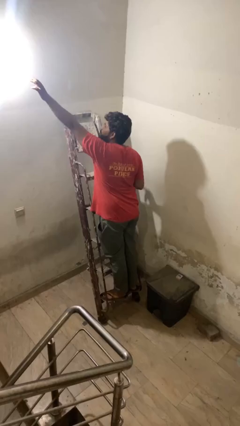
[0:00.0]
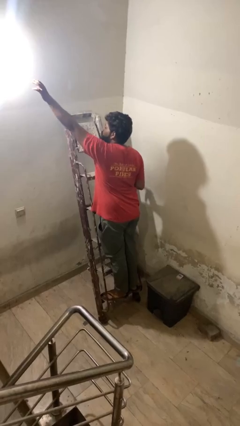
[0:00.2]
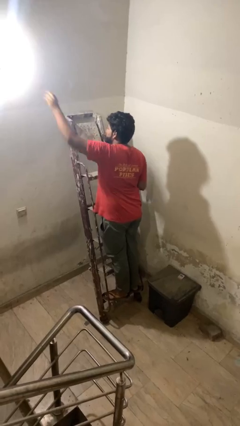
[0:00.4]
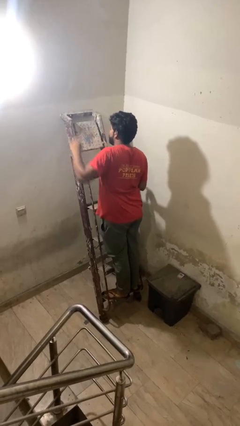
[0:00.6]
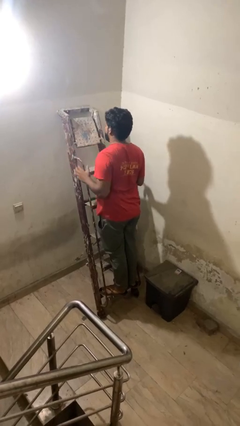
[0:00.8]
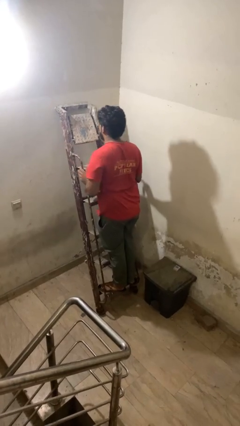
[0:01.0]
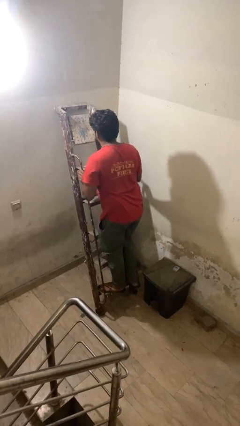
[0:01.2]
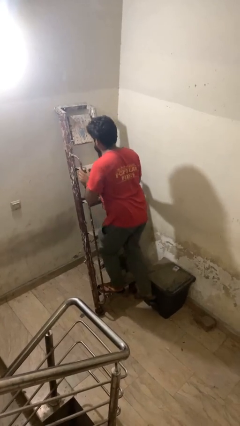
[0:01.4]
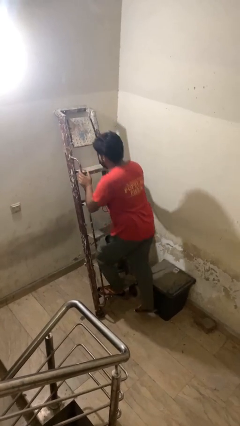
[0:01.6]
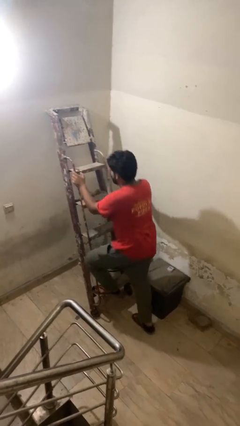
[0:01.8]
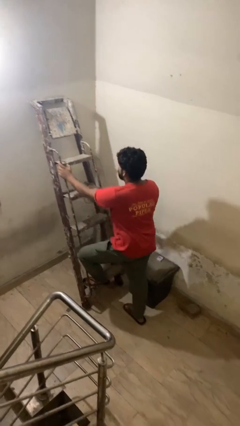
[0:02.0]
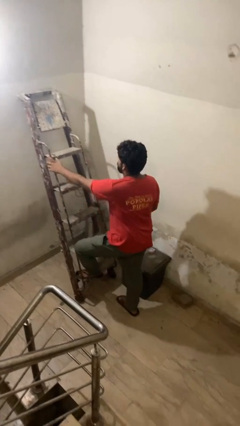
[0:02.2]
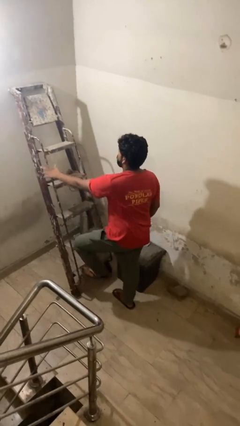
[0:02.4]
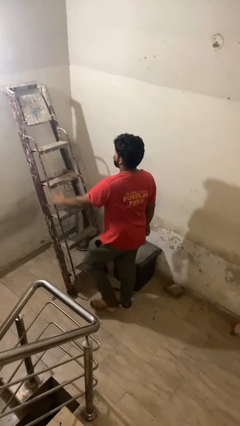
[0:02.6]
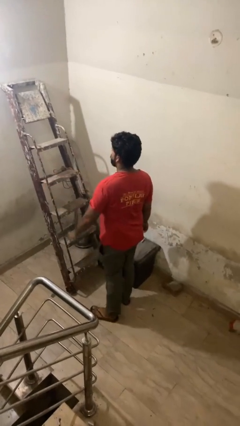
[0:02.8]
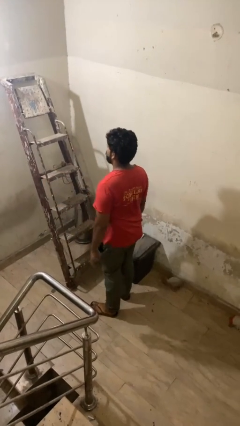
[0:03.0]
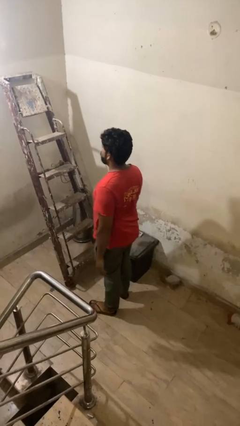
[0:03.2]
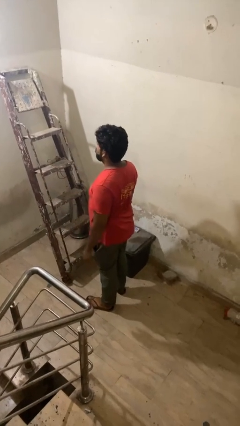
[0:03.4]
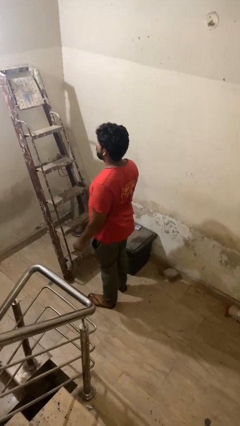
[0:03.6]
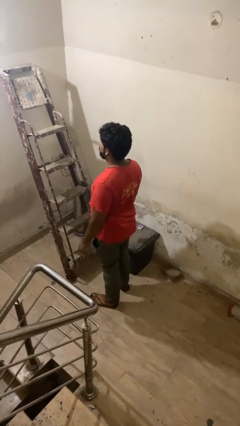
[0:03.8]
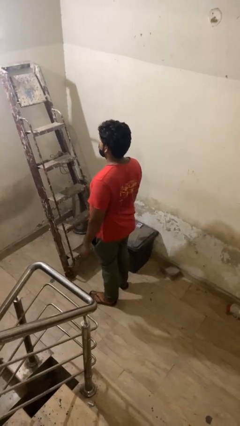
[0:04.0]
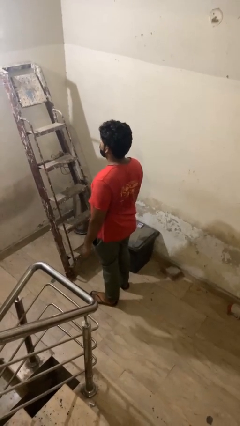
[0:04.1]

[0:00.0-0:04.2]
person climbs down ladder

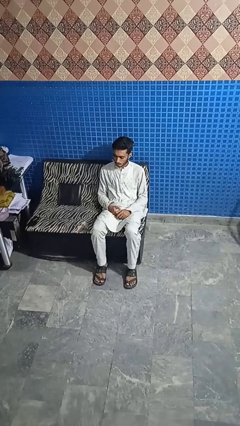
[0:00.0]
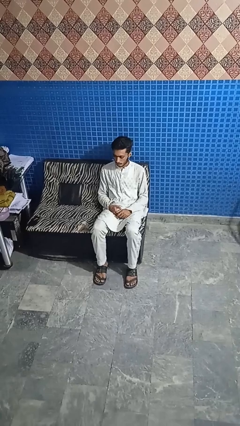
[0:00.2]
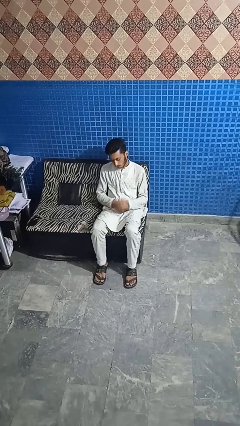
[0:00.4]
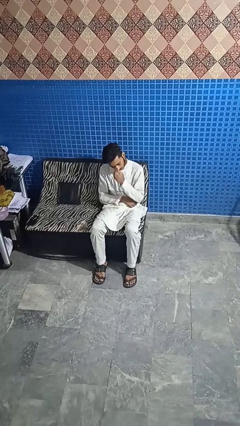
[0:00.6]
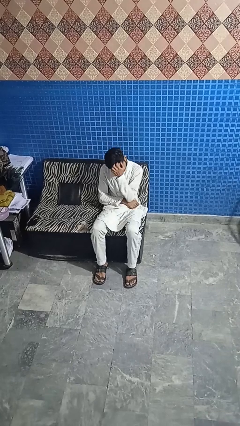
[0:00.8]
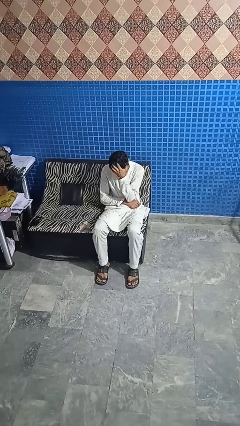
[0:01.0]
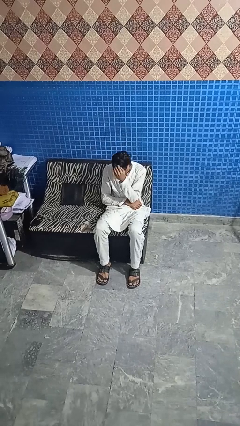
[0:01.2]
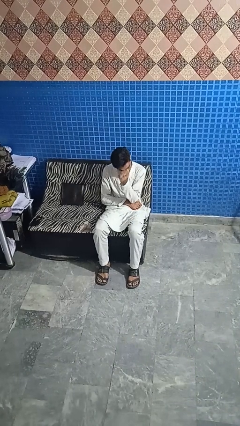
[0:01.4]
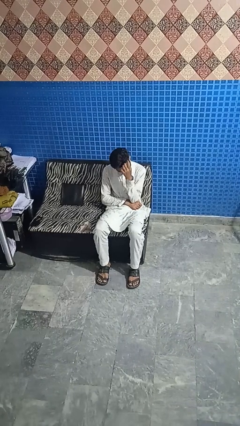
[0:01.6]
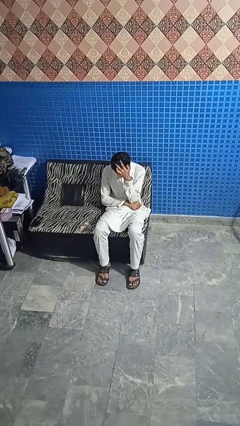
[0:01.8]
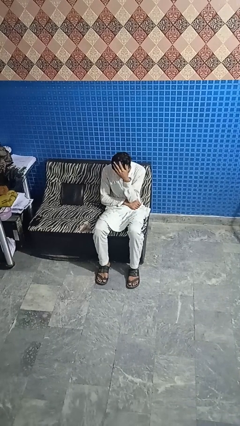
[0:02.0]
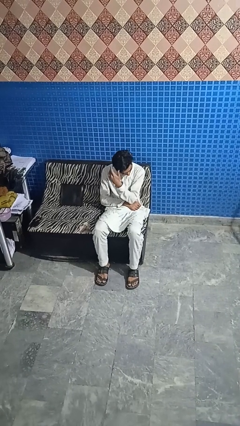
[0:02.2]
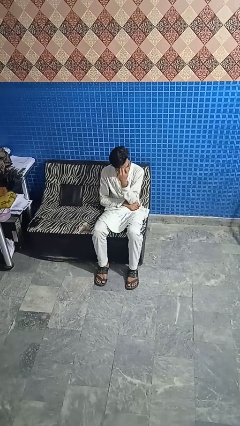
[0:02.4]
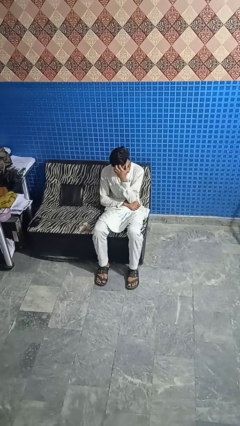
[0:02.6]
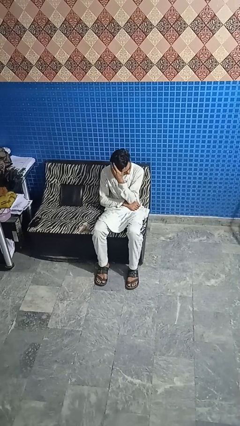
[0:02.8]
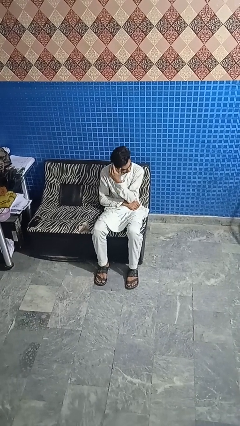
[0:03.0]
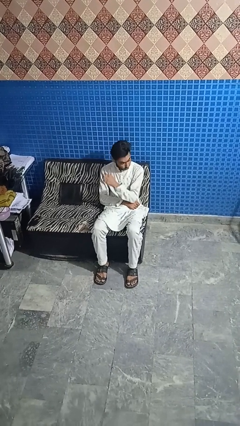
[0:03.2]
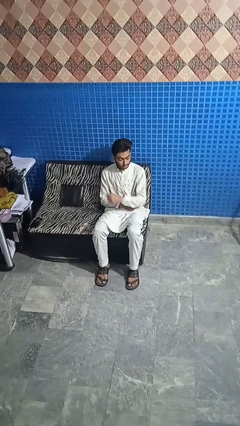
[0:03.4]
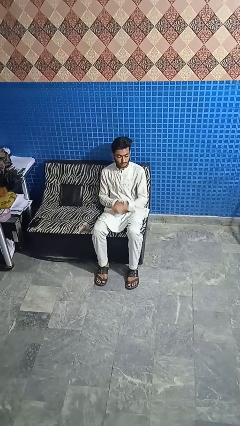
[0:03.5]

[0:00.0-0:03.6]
person strokes hair

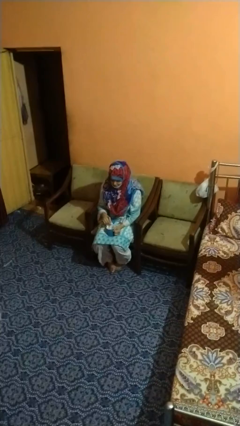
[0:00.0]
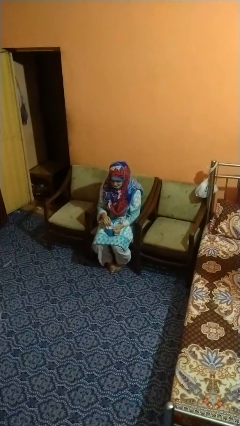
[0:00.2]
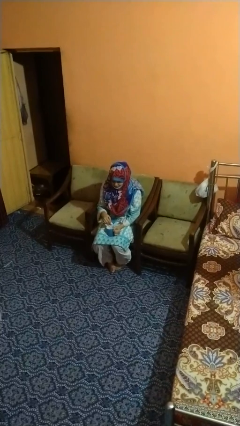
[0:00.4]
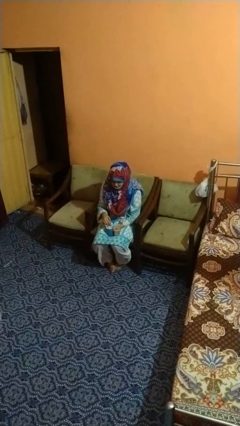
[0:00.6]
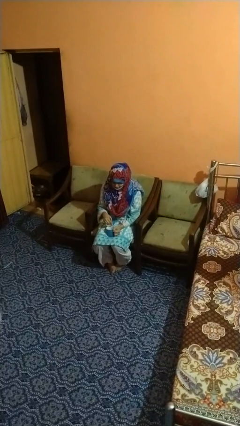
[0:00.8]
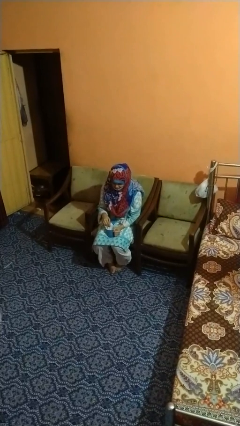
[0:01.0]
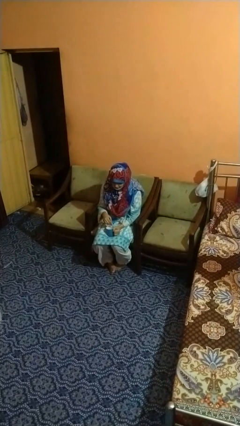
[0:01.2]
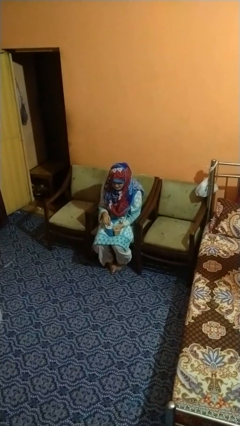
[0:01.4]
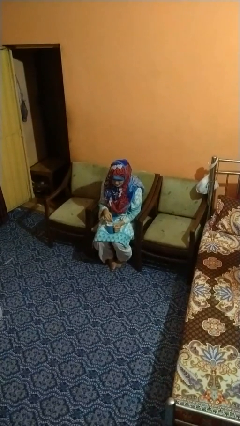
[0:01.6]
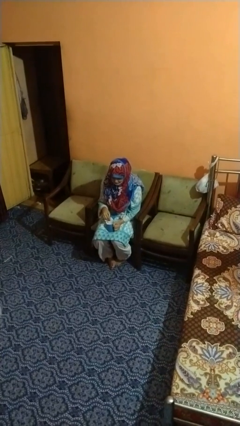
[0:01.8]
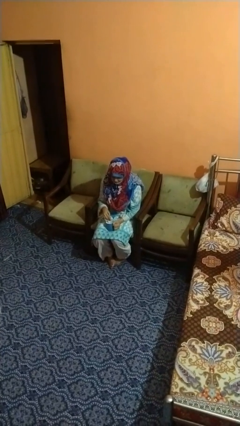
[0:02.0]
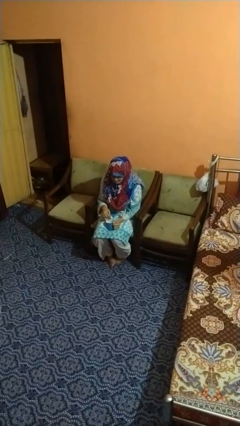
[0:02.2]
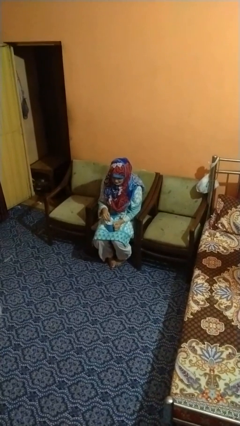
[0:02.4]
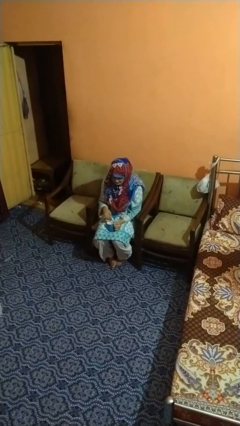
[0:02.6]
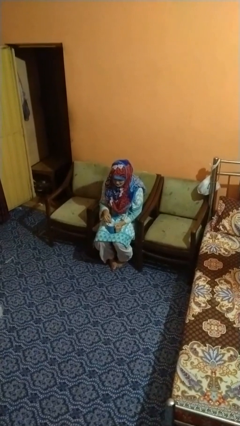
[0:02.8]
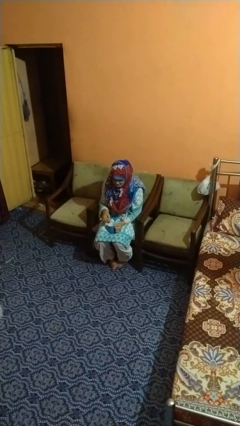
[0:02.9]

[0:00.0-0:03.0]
person stirs mug

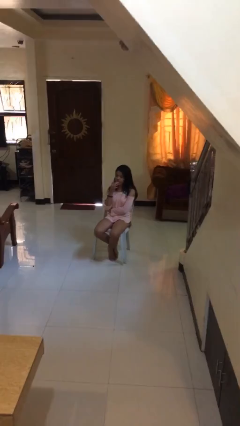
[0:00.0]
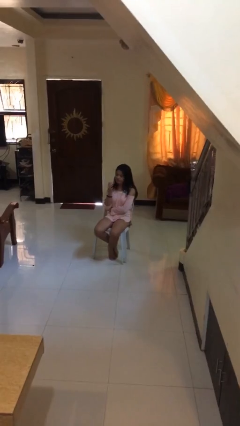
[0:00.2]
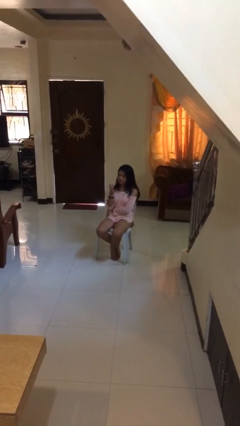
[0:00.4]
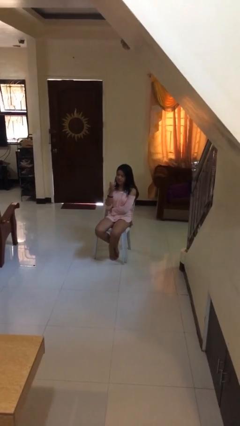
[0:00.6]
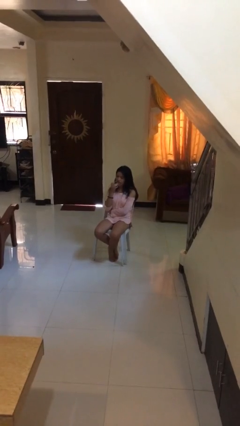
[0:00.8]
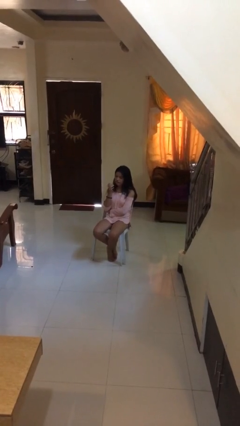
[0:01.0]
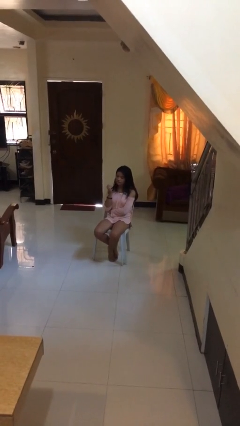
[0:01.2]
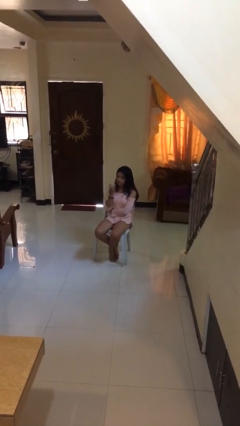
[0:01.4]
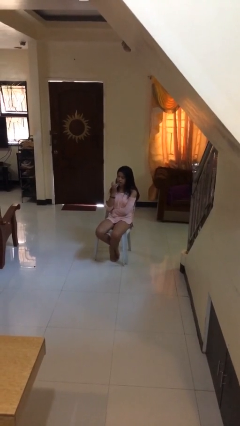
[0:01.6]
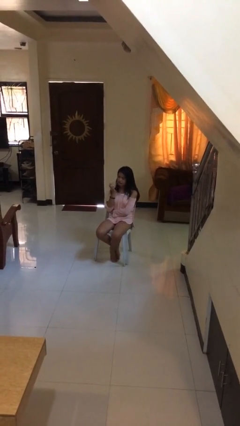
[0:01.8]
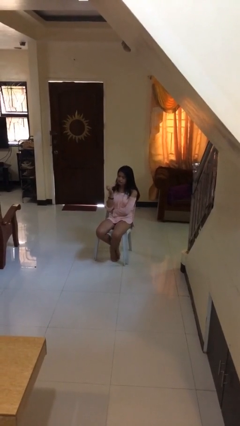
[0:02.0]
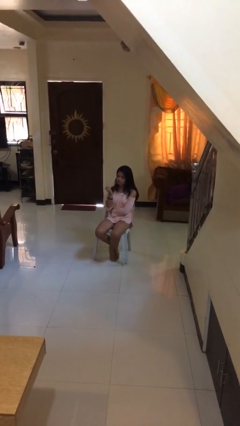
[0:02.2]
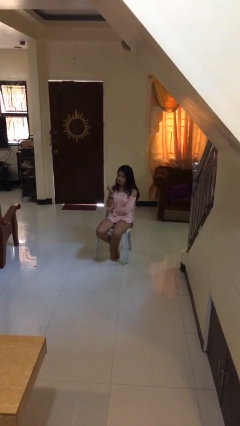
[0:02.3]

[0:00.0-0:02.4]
person licks fingers

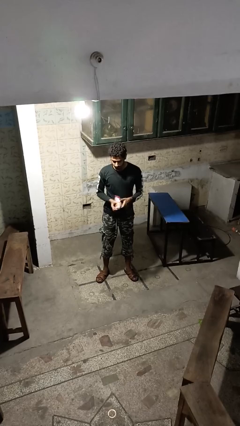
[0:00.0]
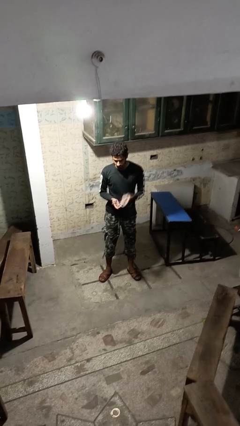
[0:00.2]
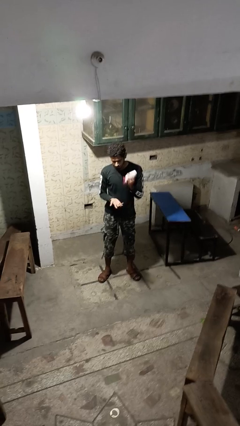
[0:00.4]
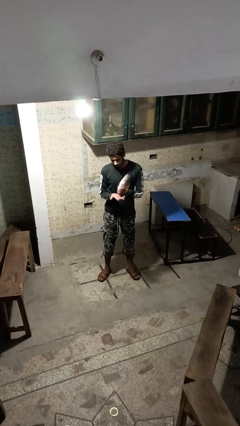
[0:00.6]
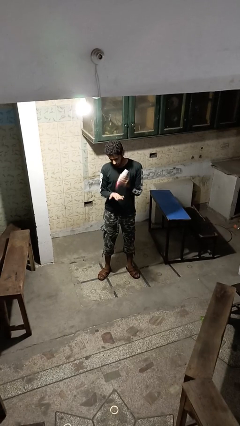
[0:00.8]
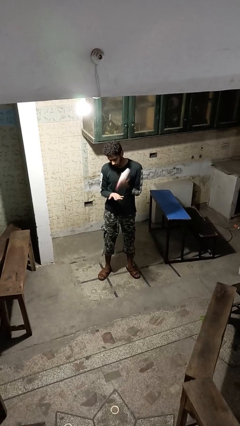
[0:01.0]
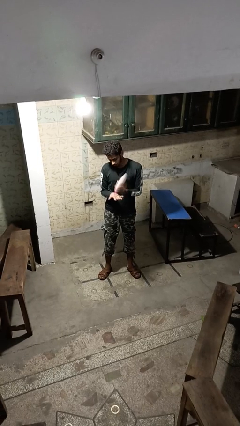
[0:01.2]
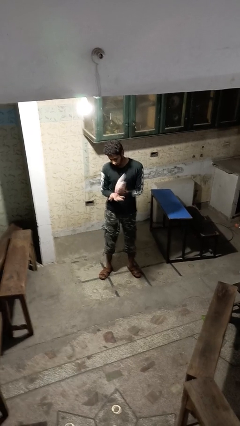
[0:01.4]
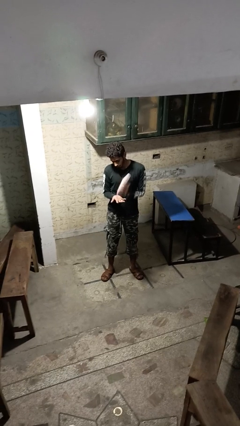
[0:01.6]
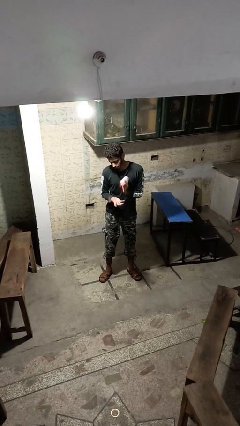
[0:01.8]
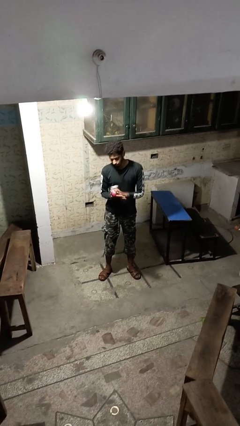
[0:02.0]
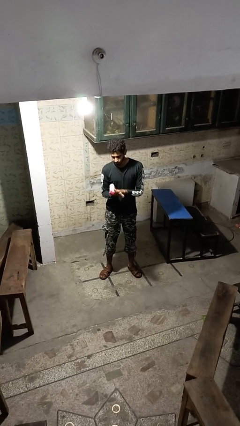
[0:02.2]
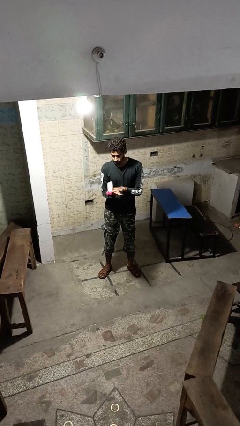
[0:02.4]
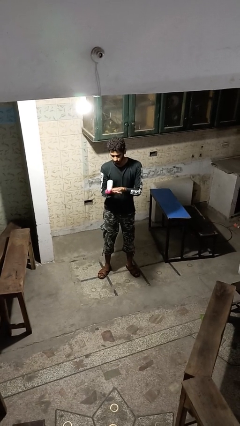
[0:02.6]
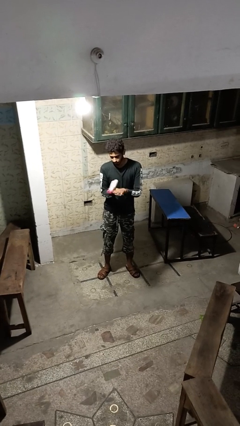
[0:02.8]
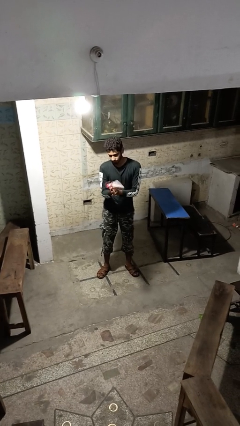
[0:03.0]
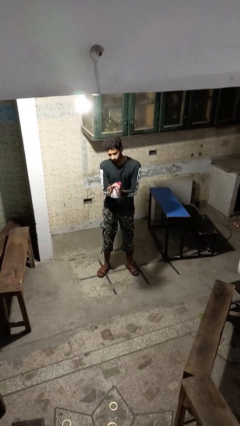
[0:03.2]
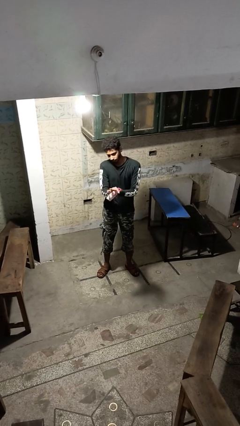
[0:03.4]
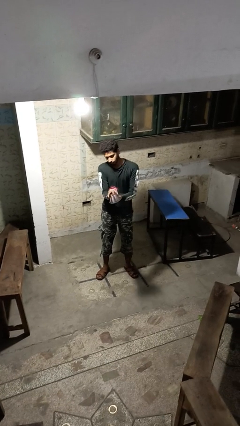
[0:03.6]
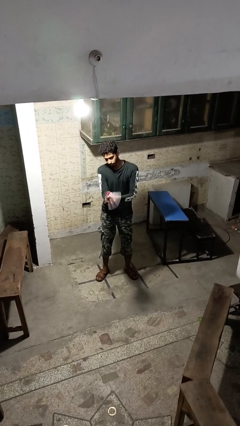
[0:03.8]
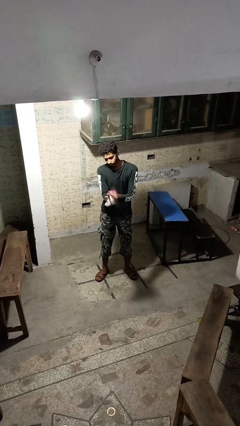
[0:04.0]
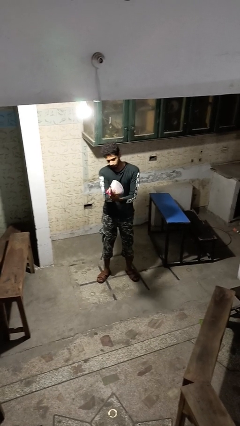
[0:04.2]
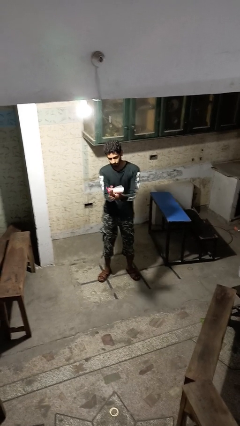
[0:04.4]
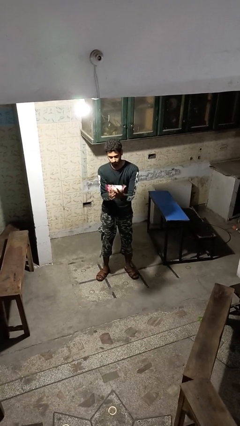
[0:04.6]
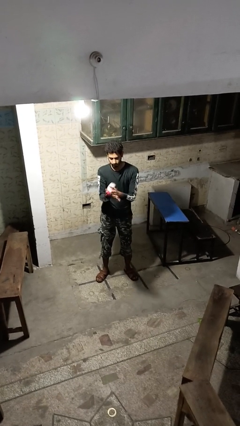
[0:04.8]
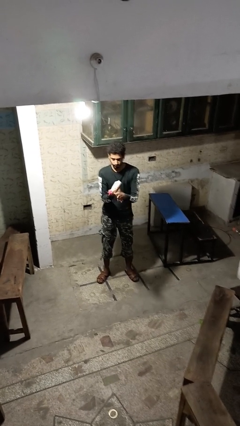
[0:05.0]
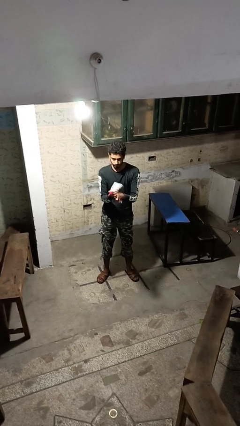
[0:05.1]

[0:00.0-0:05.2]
person applies sunscreen
